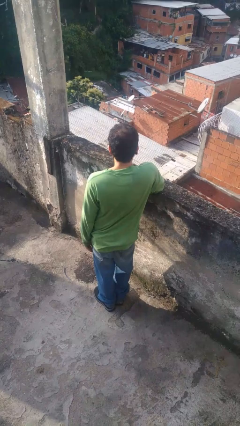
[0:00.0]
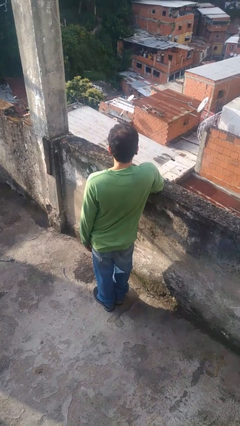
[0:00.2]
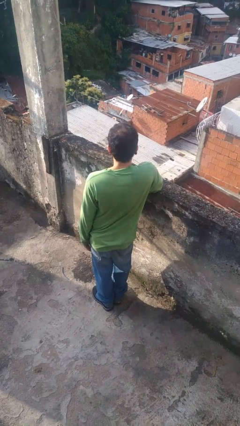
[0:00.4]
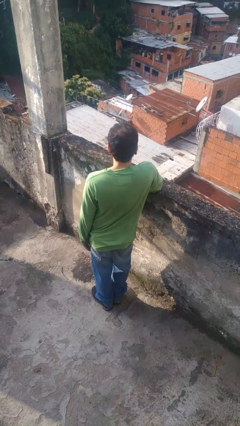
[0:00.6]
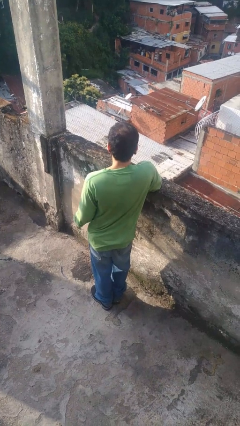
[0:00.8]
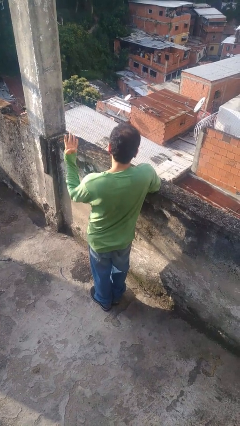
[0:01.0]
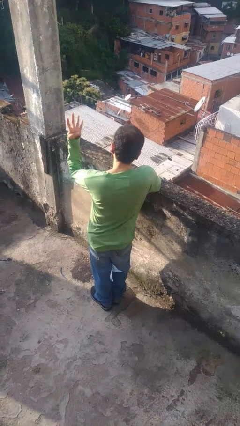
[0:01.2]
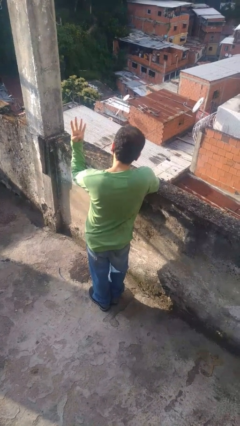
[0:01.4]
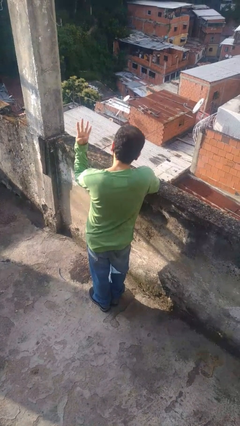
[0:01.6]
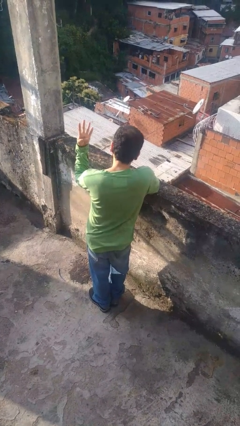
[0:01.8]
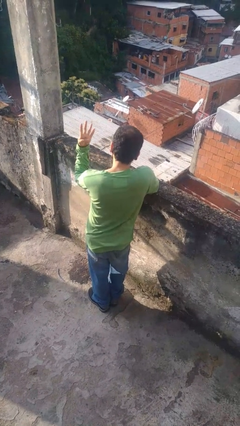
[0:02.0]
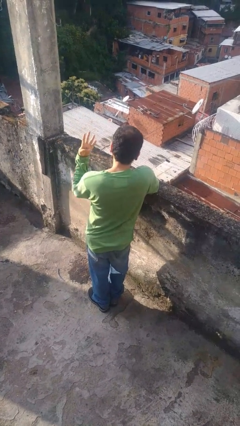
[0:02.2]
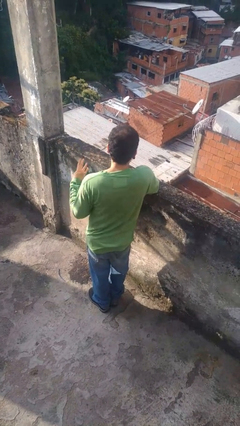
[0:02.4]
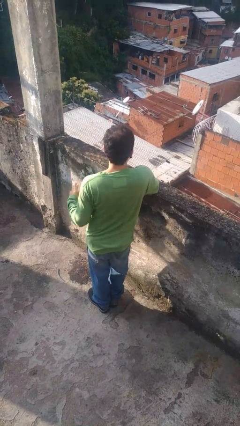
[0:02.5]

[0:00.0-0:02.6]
person gestures number four

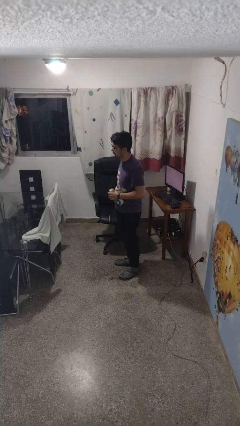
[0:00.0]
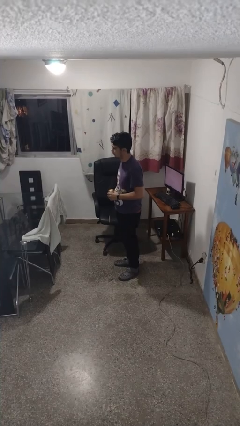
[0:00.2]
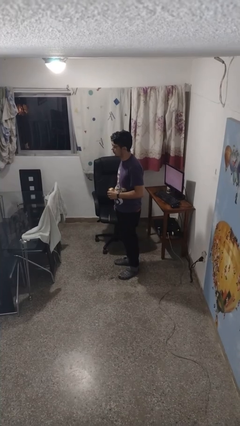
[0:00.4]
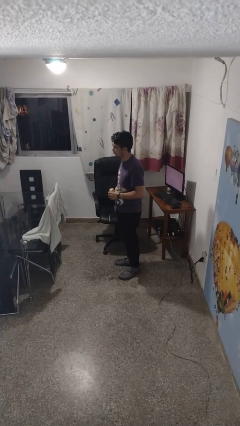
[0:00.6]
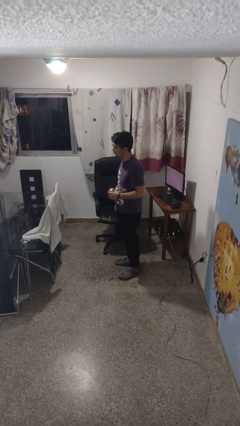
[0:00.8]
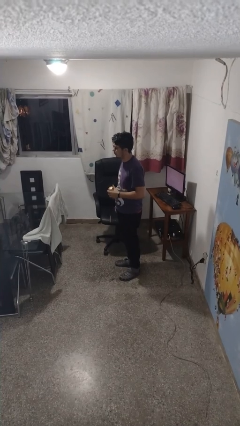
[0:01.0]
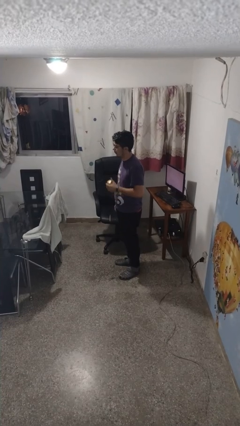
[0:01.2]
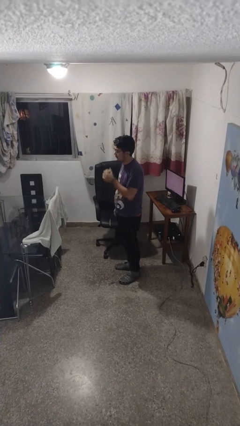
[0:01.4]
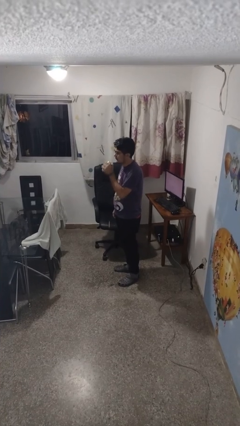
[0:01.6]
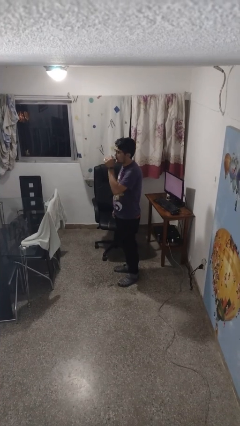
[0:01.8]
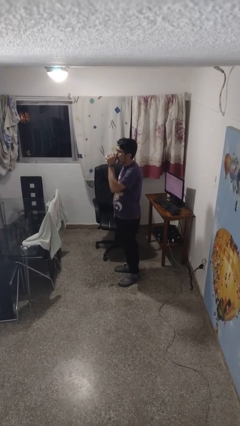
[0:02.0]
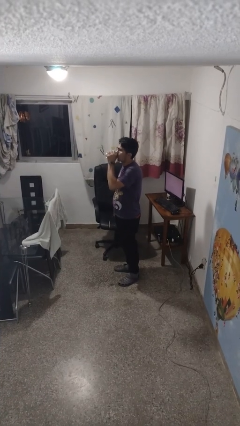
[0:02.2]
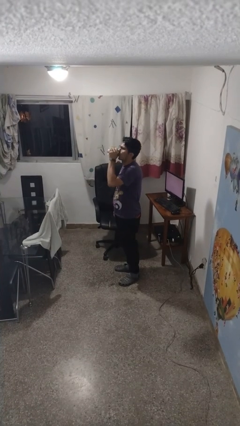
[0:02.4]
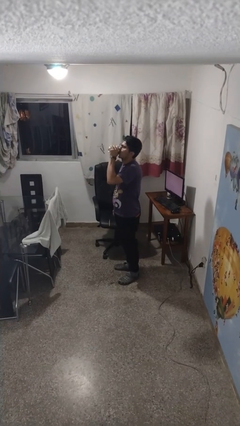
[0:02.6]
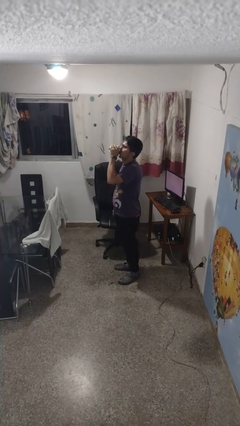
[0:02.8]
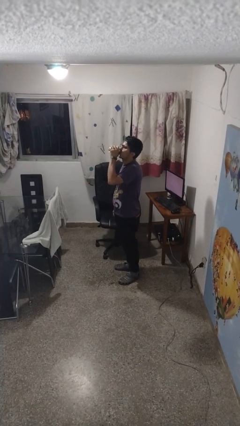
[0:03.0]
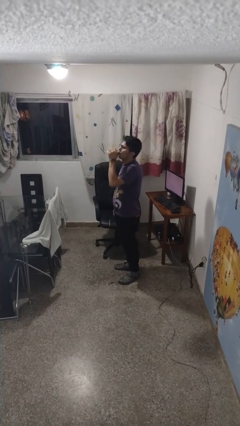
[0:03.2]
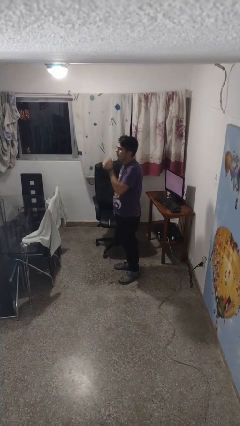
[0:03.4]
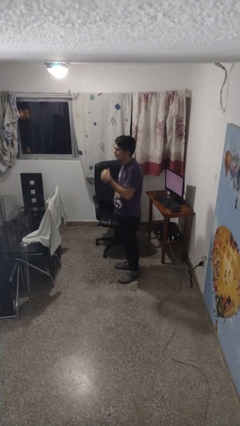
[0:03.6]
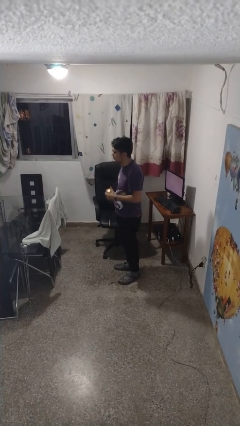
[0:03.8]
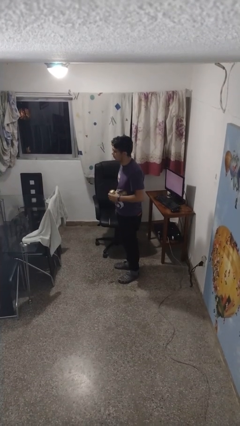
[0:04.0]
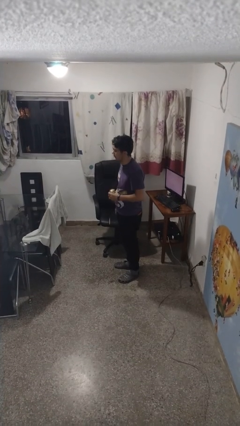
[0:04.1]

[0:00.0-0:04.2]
person drinks from beverage can

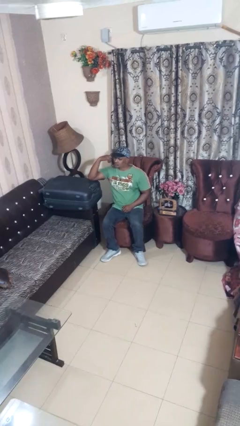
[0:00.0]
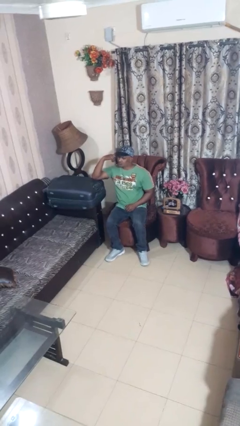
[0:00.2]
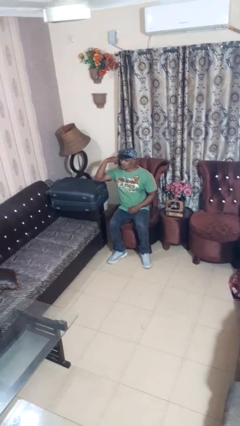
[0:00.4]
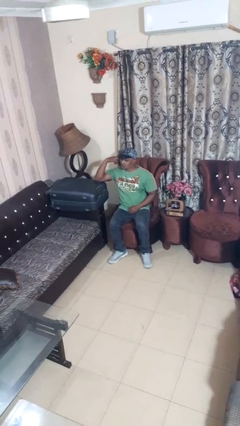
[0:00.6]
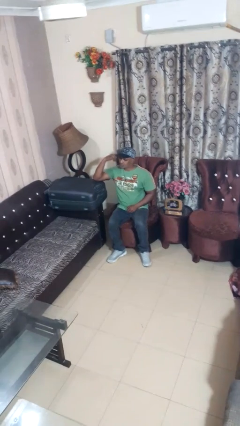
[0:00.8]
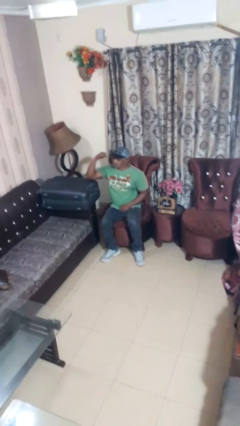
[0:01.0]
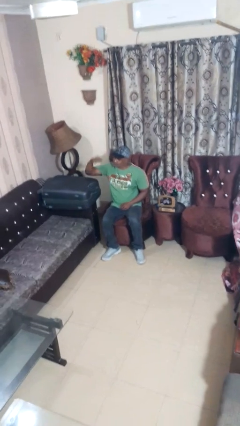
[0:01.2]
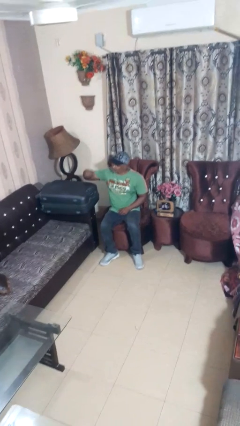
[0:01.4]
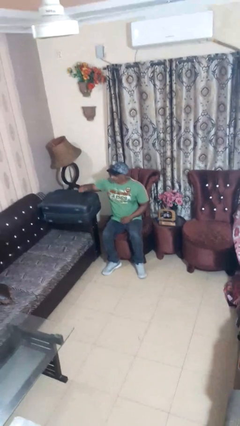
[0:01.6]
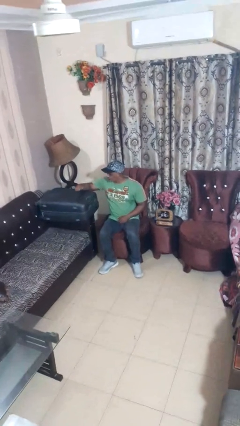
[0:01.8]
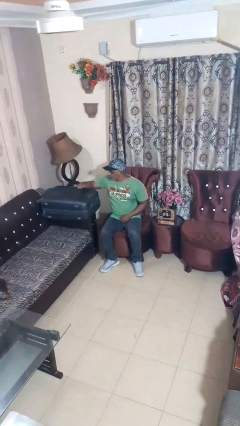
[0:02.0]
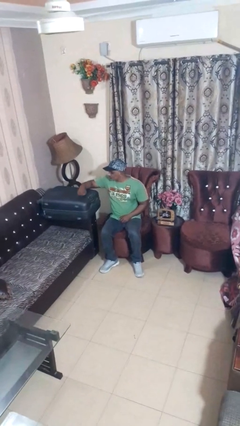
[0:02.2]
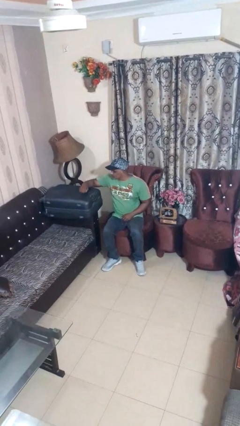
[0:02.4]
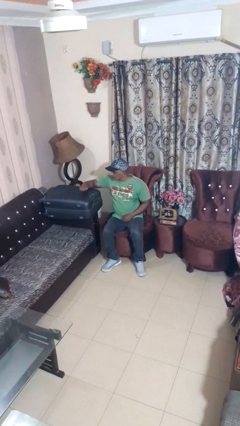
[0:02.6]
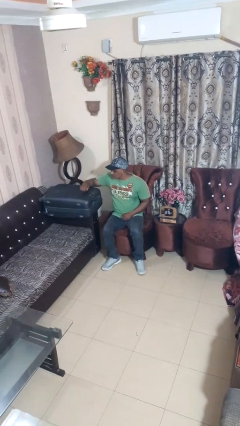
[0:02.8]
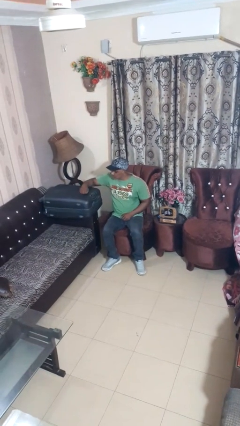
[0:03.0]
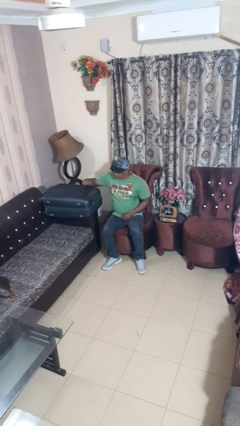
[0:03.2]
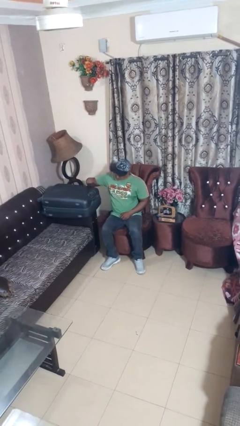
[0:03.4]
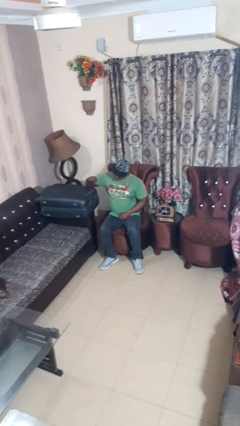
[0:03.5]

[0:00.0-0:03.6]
person taps object with finger

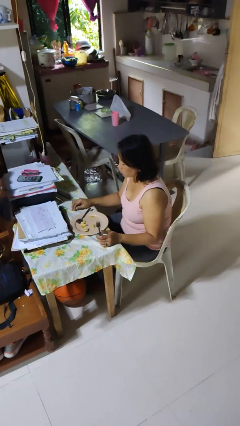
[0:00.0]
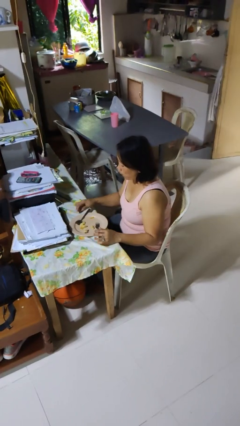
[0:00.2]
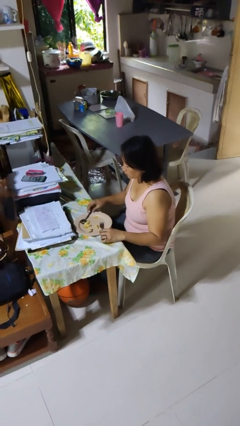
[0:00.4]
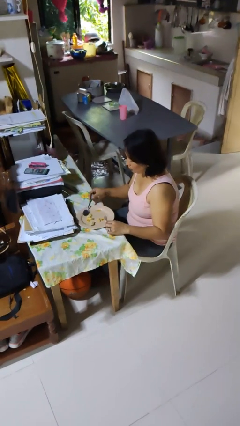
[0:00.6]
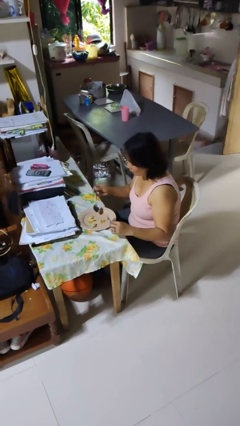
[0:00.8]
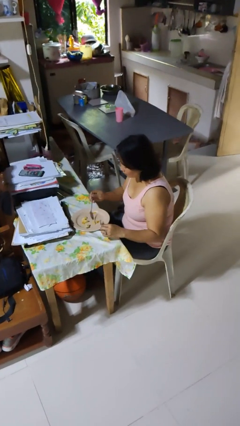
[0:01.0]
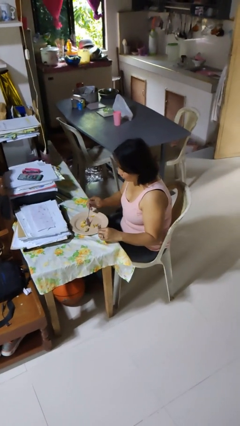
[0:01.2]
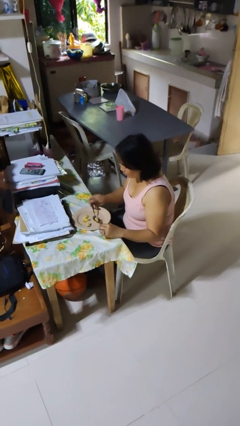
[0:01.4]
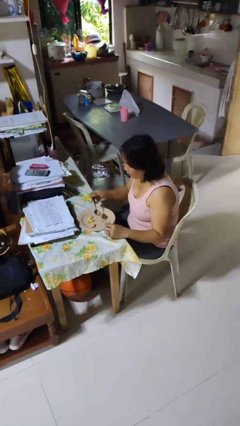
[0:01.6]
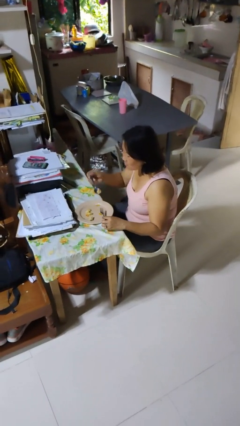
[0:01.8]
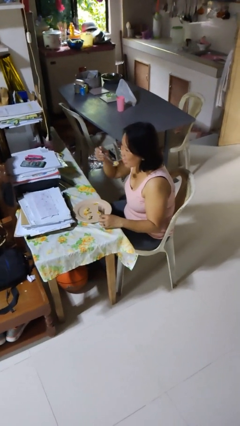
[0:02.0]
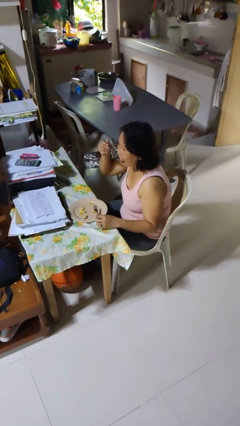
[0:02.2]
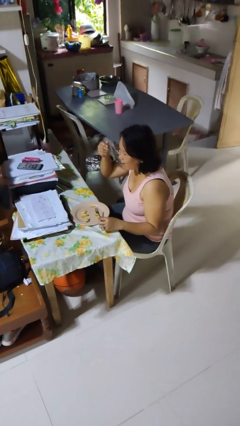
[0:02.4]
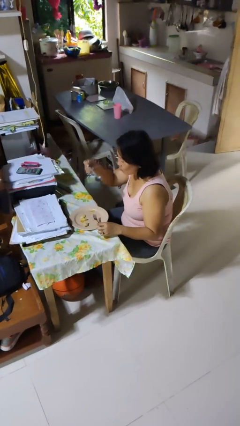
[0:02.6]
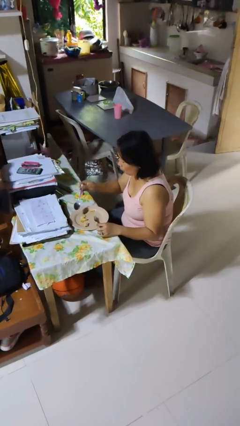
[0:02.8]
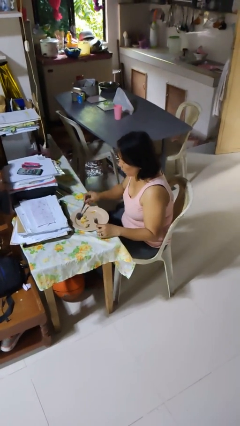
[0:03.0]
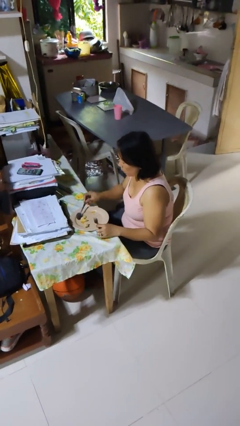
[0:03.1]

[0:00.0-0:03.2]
person eats with utensil

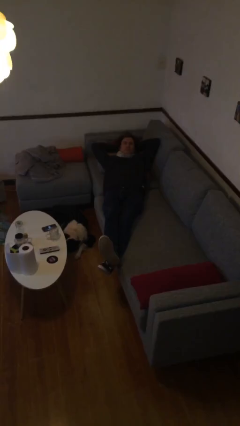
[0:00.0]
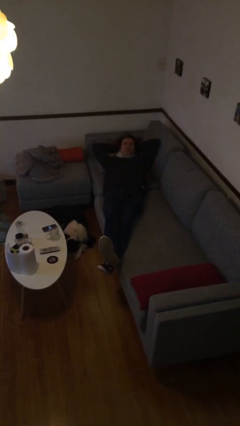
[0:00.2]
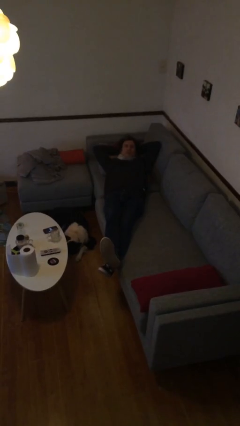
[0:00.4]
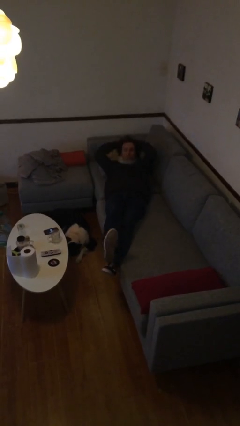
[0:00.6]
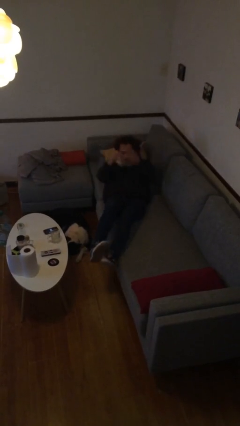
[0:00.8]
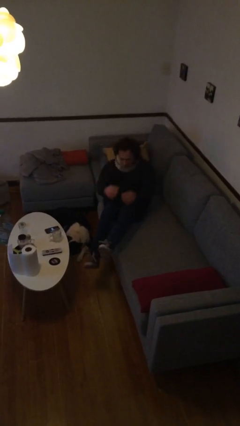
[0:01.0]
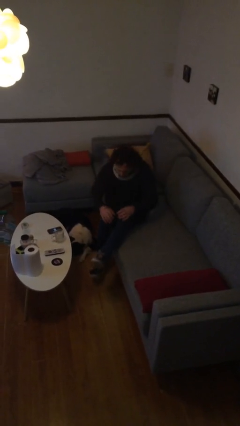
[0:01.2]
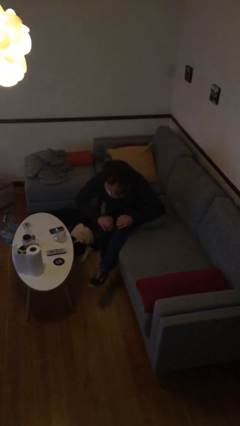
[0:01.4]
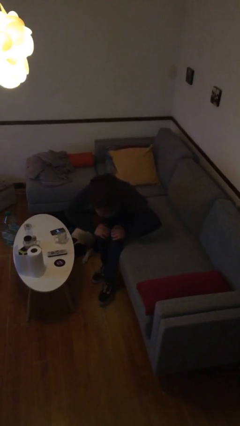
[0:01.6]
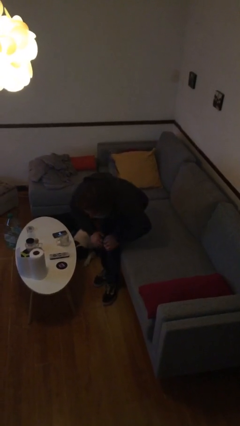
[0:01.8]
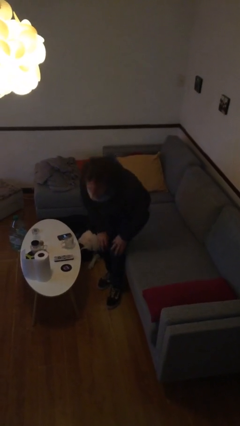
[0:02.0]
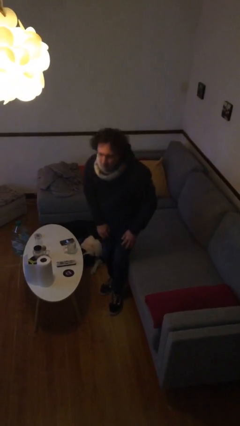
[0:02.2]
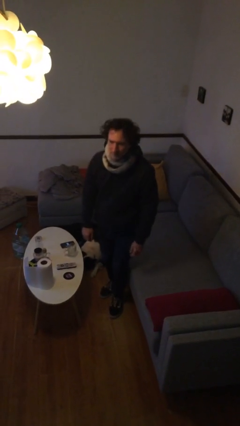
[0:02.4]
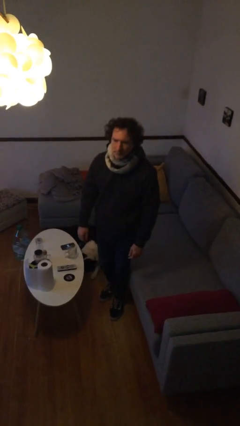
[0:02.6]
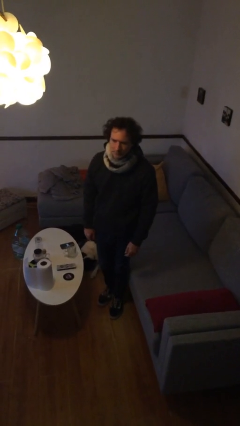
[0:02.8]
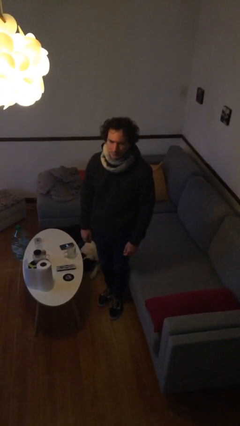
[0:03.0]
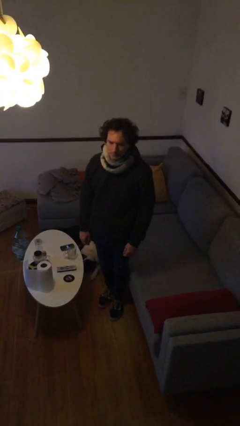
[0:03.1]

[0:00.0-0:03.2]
person stands up

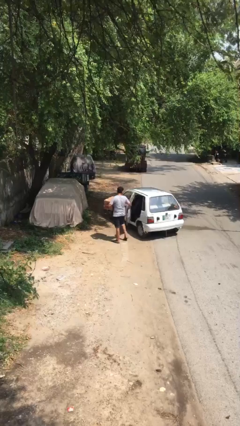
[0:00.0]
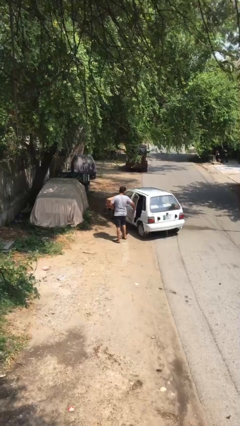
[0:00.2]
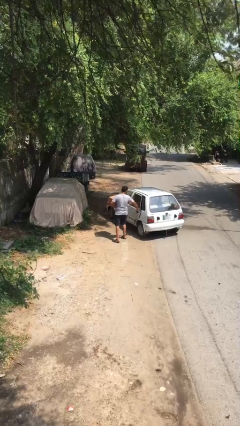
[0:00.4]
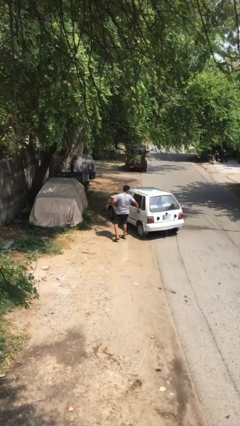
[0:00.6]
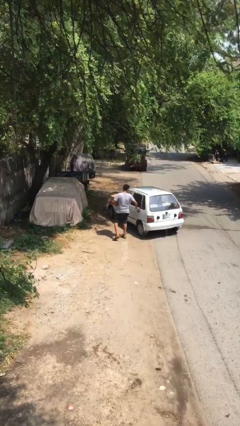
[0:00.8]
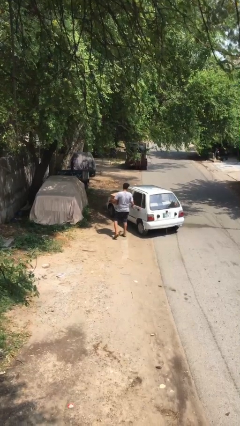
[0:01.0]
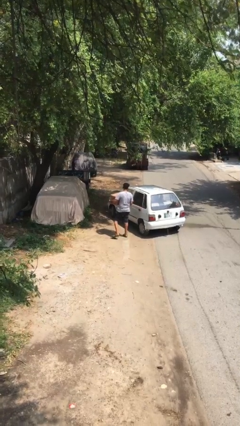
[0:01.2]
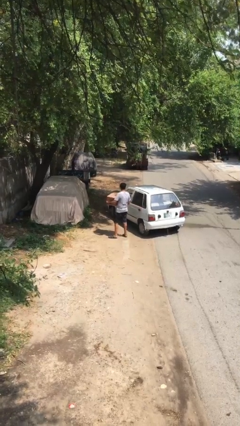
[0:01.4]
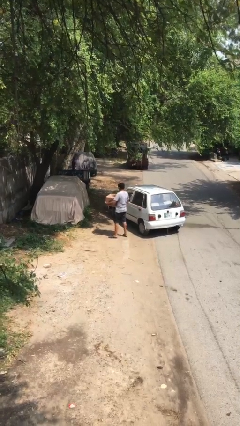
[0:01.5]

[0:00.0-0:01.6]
person closes car door
